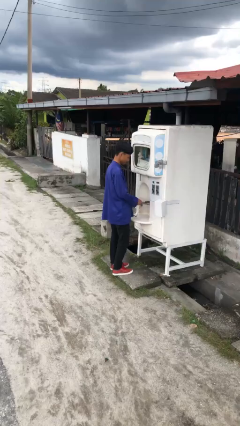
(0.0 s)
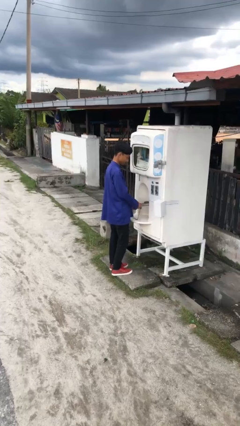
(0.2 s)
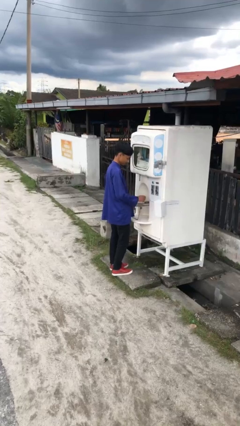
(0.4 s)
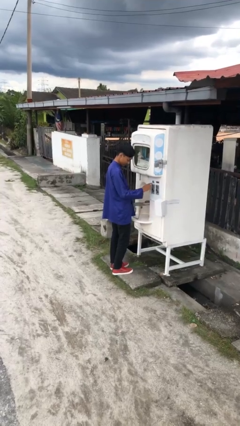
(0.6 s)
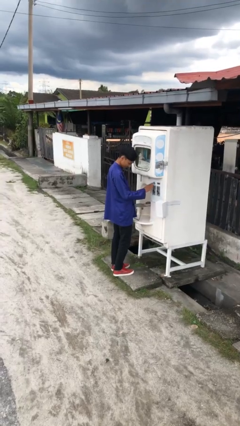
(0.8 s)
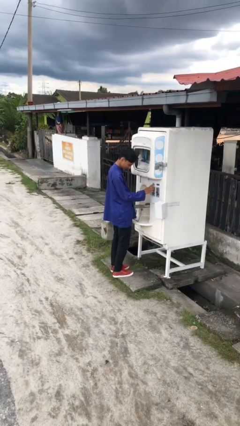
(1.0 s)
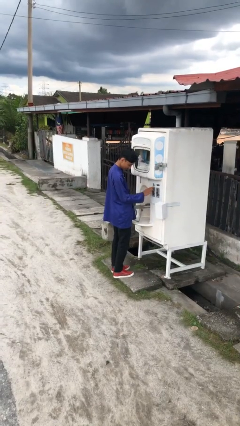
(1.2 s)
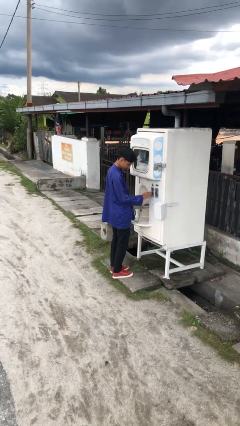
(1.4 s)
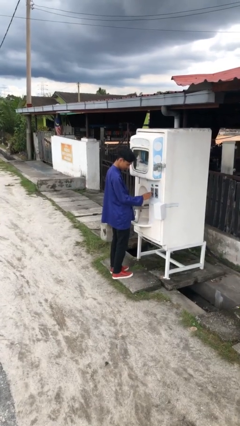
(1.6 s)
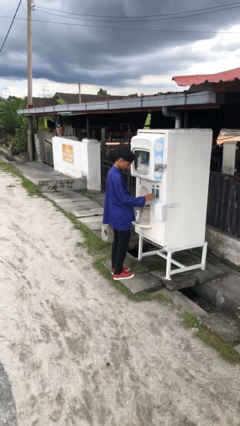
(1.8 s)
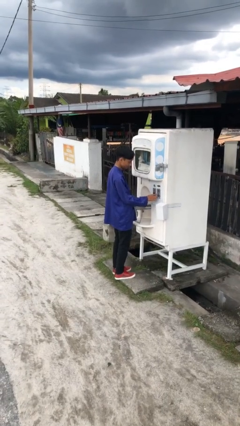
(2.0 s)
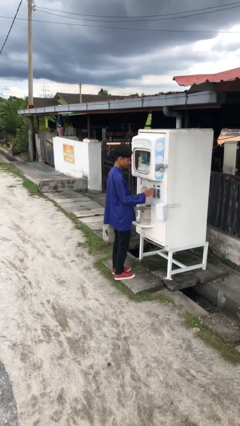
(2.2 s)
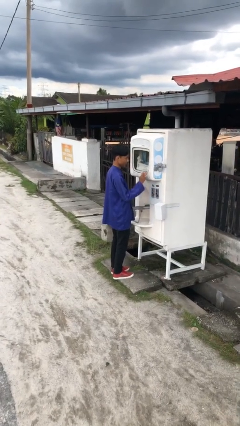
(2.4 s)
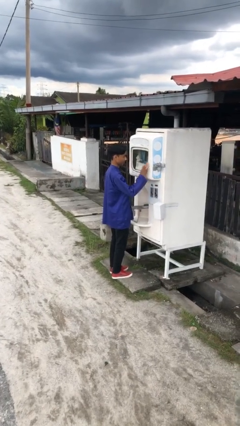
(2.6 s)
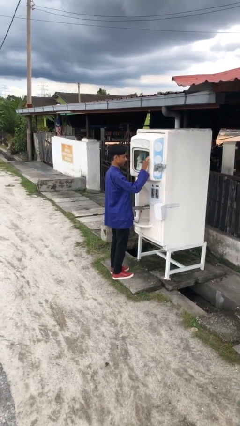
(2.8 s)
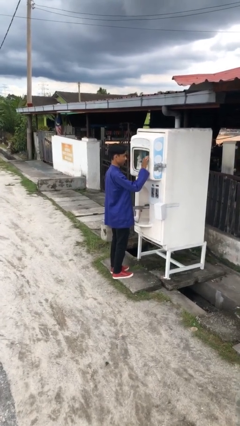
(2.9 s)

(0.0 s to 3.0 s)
person purchases from machine

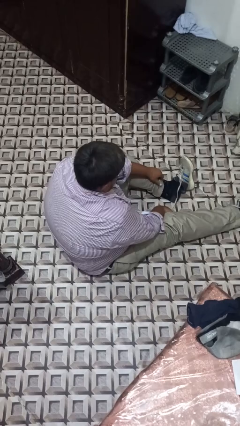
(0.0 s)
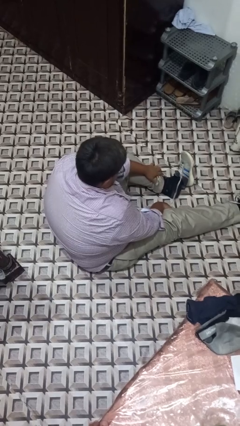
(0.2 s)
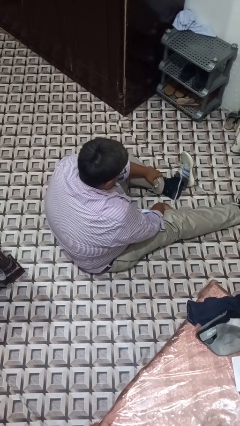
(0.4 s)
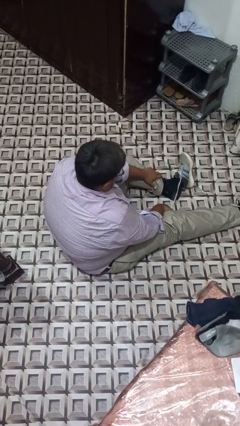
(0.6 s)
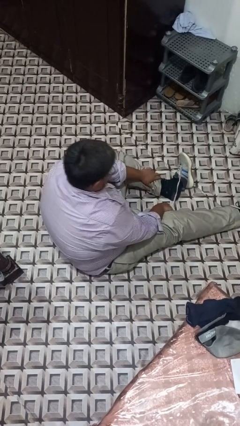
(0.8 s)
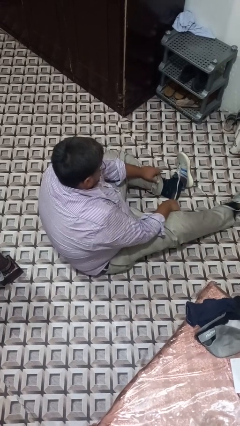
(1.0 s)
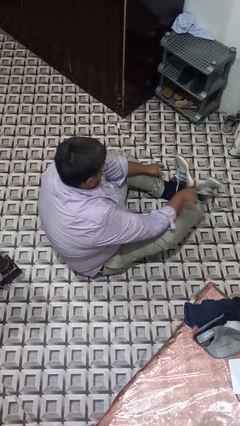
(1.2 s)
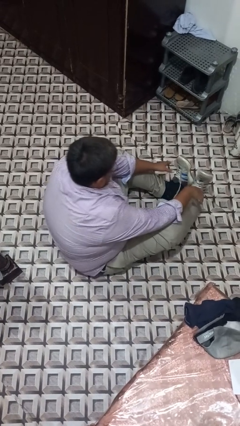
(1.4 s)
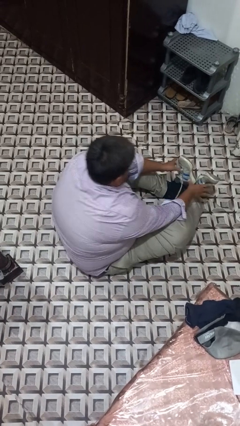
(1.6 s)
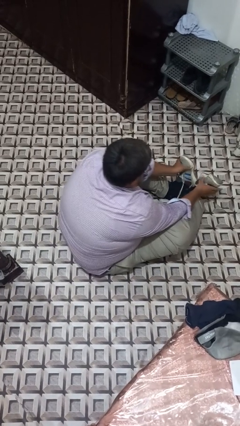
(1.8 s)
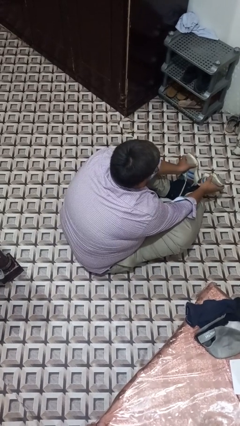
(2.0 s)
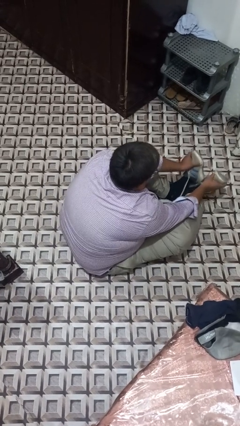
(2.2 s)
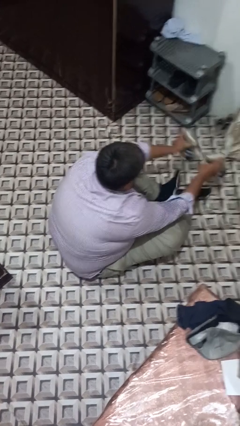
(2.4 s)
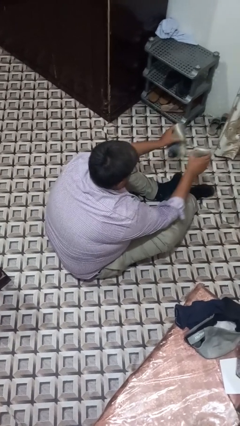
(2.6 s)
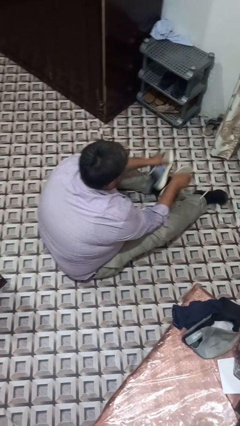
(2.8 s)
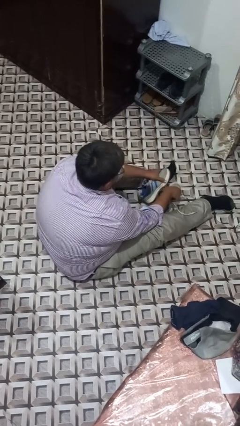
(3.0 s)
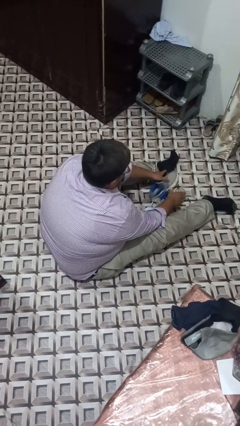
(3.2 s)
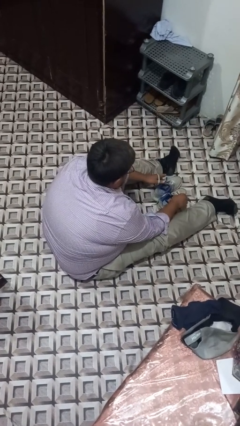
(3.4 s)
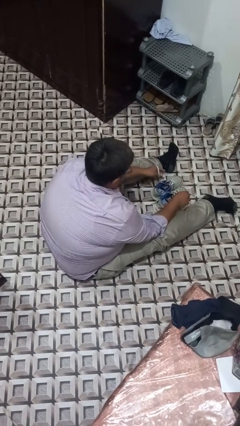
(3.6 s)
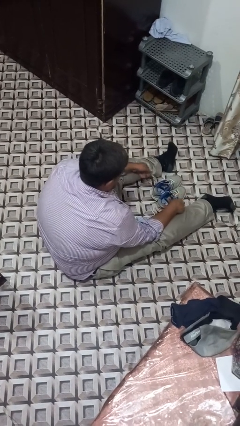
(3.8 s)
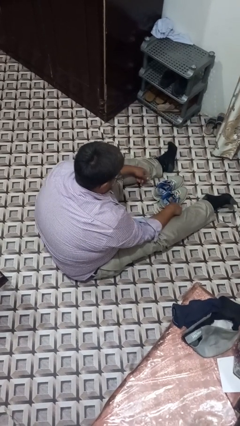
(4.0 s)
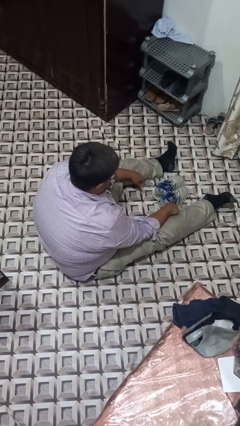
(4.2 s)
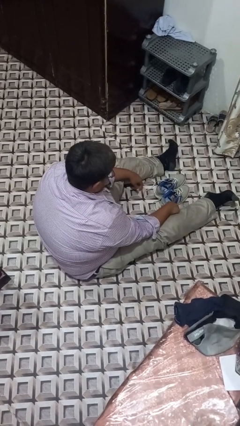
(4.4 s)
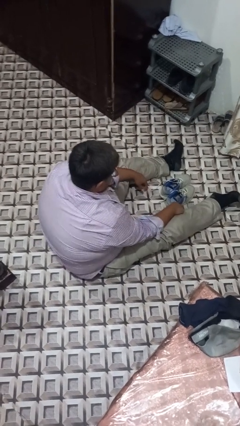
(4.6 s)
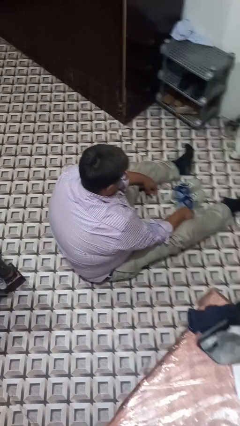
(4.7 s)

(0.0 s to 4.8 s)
person takes off shoes

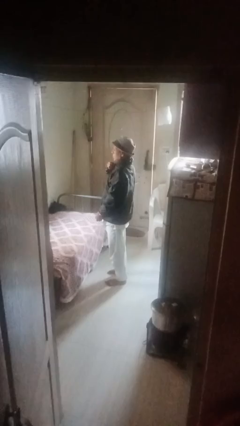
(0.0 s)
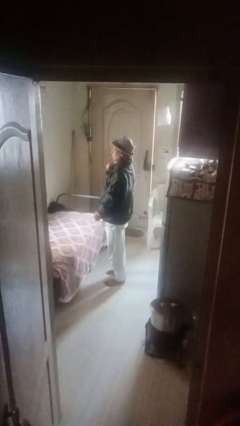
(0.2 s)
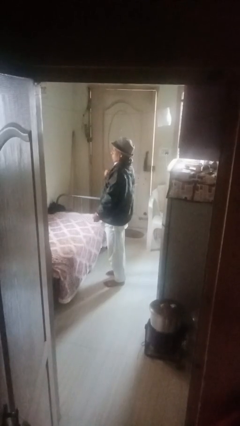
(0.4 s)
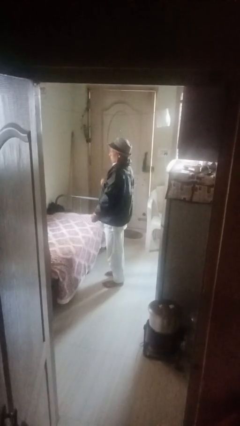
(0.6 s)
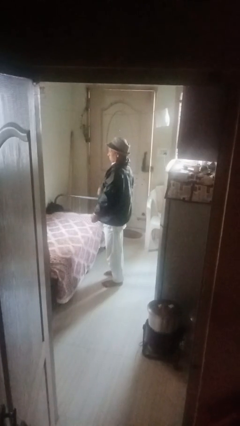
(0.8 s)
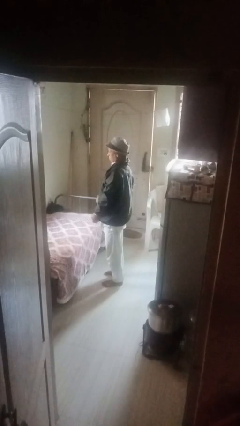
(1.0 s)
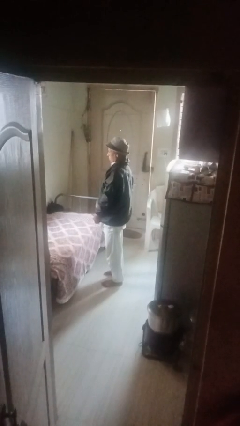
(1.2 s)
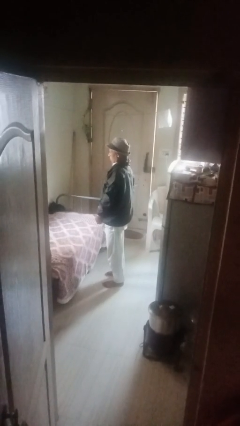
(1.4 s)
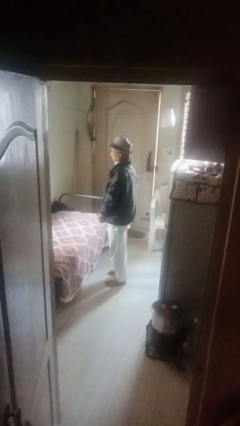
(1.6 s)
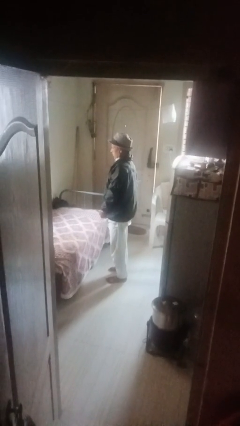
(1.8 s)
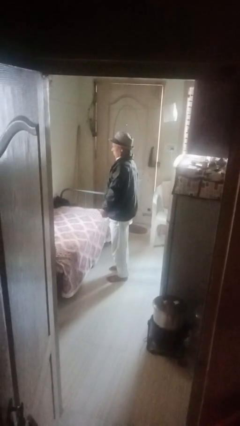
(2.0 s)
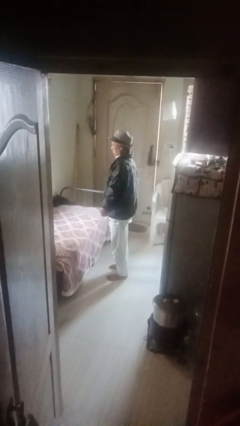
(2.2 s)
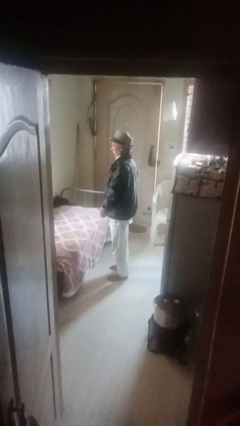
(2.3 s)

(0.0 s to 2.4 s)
person unzips jacket

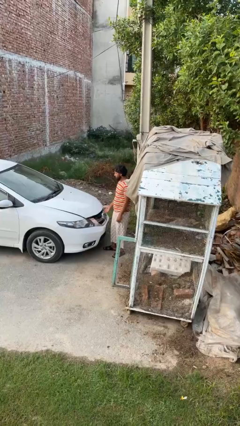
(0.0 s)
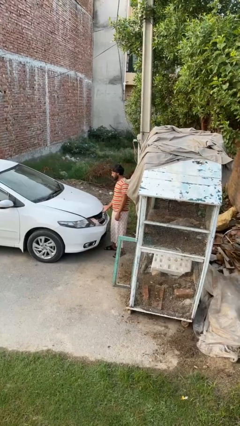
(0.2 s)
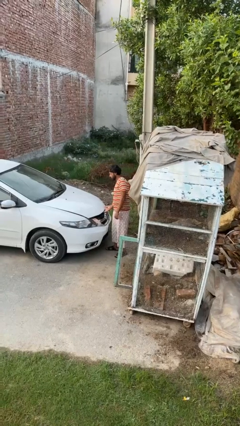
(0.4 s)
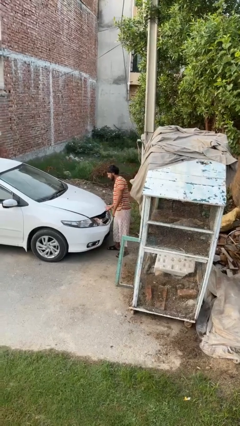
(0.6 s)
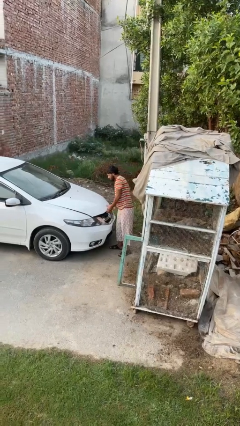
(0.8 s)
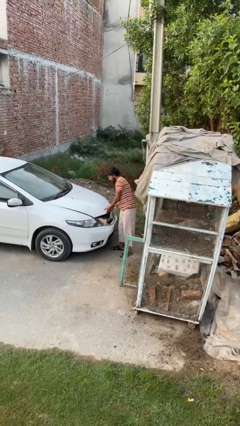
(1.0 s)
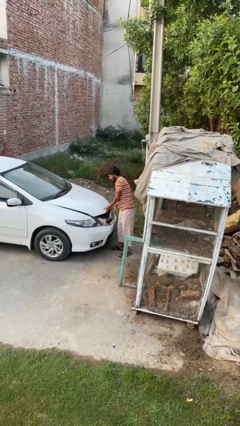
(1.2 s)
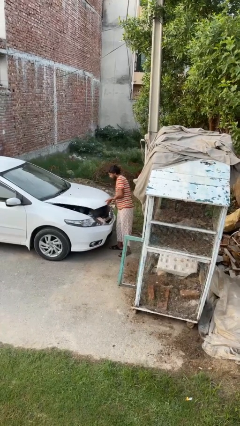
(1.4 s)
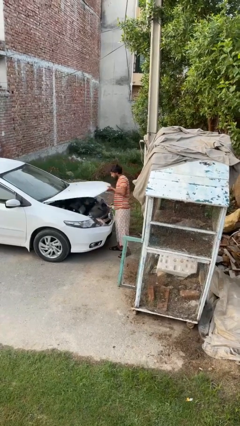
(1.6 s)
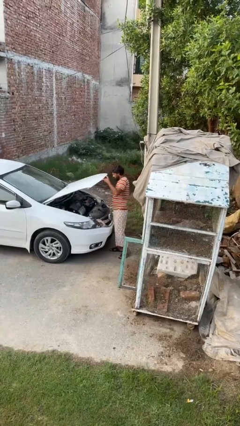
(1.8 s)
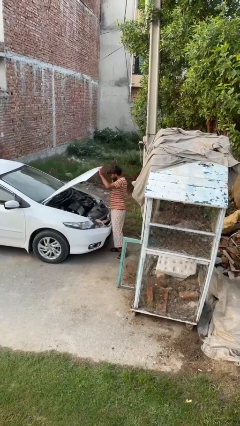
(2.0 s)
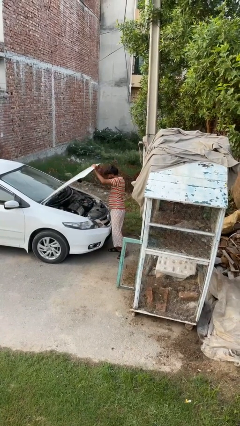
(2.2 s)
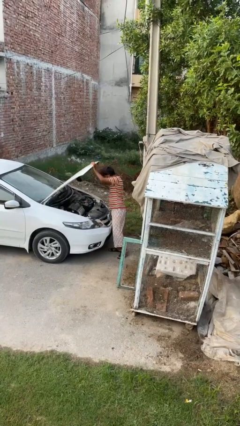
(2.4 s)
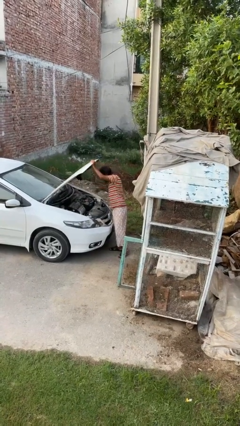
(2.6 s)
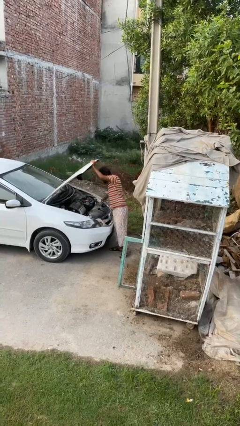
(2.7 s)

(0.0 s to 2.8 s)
person opens car hood

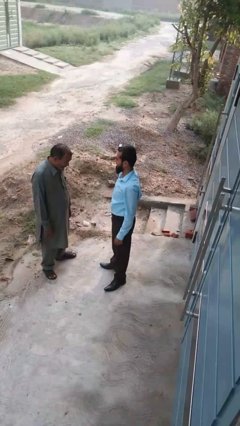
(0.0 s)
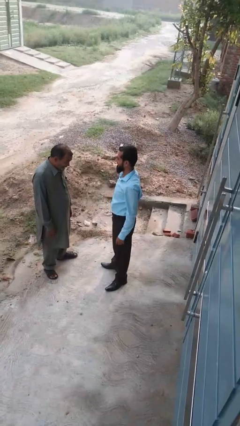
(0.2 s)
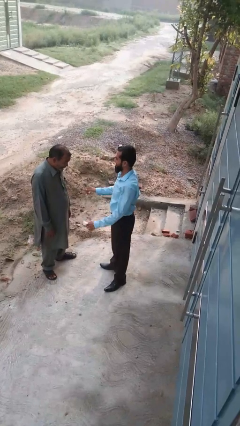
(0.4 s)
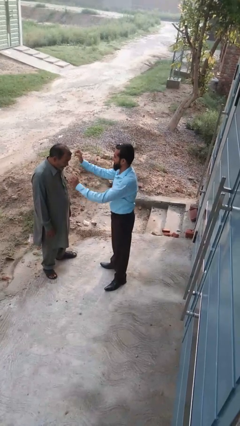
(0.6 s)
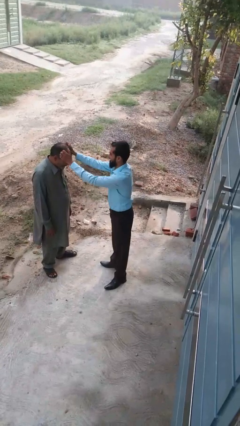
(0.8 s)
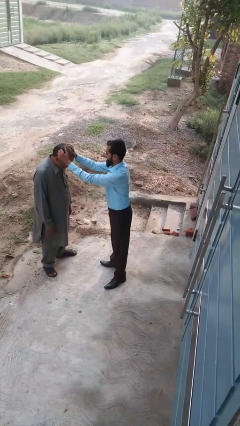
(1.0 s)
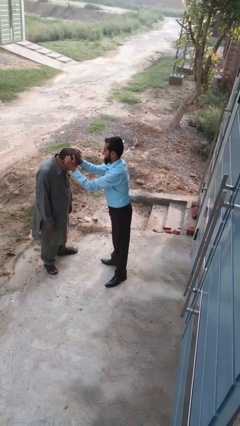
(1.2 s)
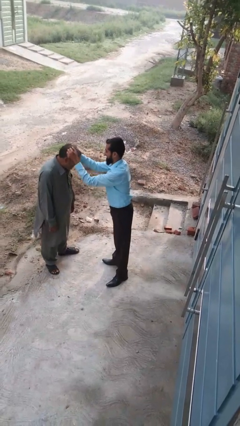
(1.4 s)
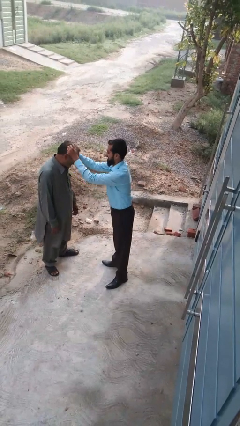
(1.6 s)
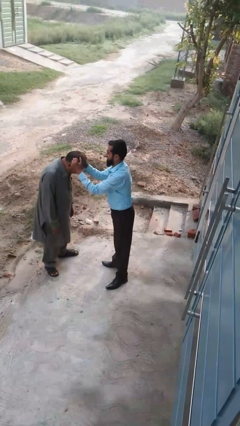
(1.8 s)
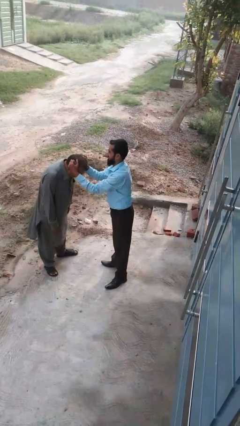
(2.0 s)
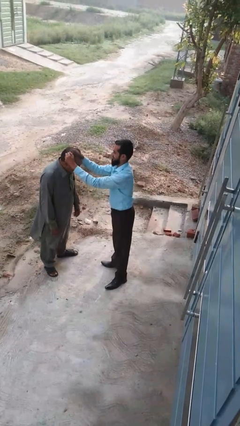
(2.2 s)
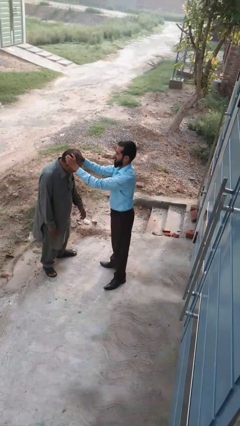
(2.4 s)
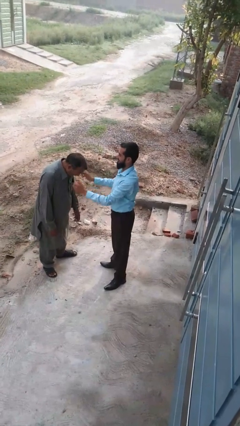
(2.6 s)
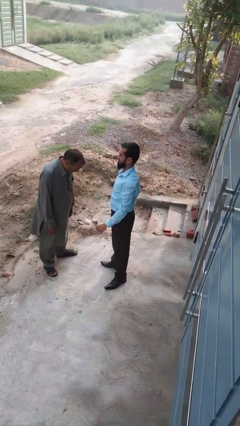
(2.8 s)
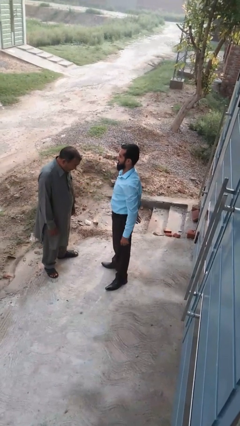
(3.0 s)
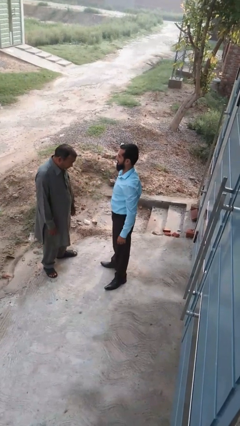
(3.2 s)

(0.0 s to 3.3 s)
person grabs person by hair

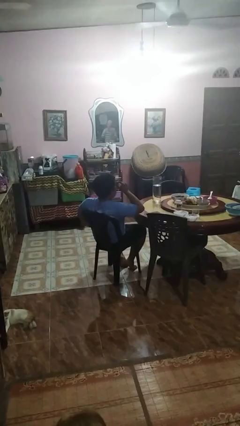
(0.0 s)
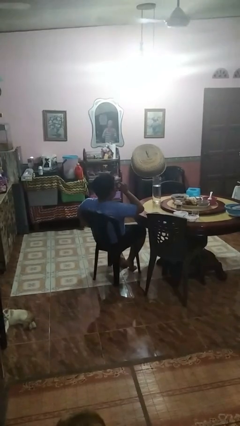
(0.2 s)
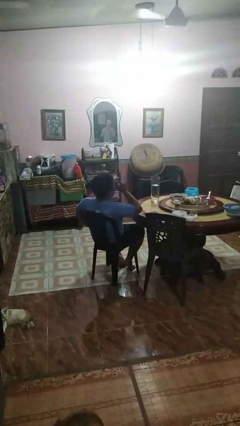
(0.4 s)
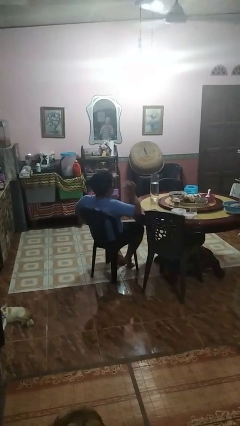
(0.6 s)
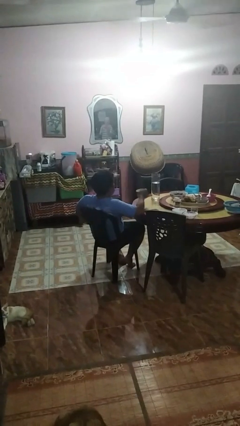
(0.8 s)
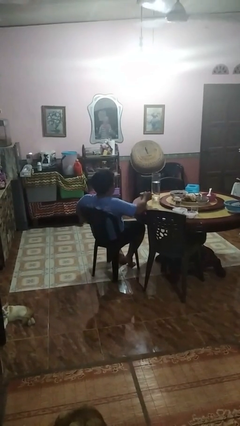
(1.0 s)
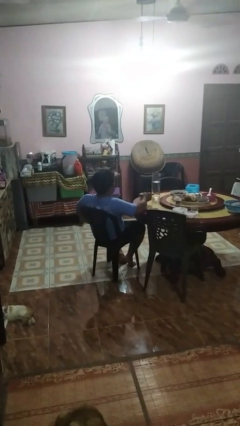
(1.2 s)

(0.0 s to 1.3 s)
person drinks from mug

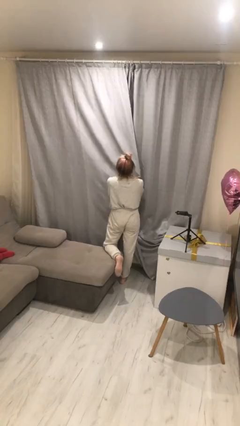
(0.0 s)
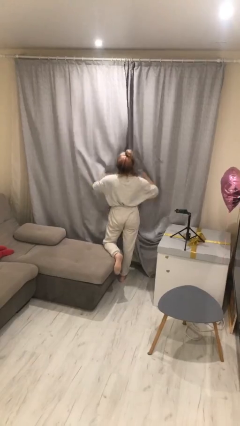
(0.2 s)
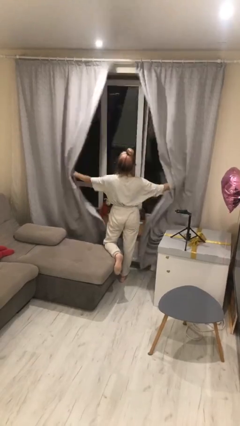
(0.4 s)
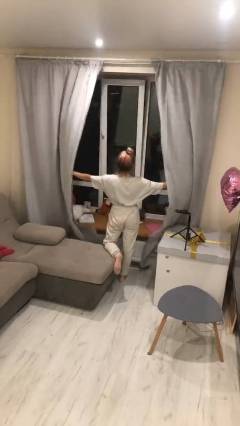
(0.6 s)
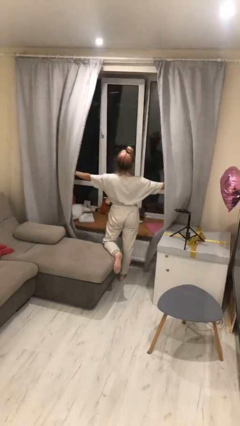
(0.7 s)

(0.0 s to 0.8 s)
person opens curtains
